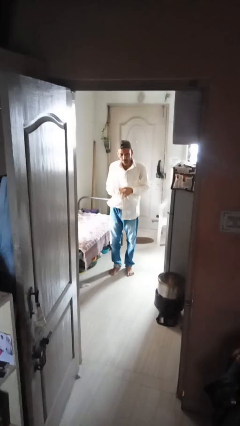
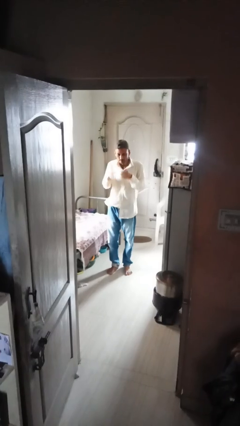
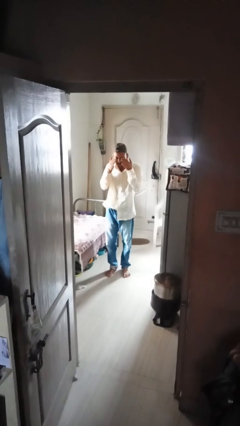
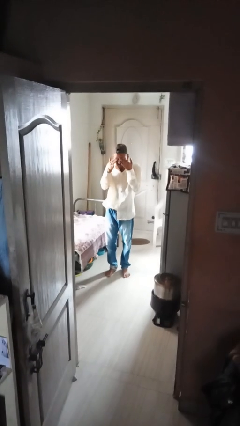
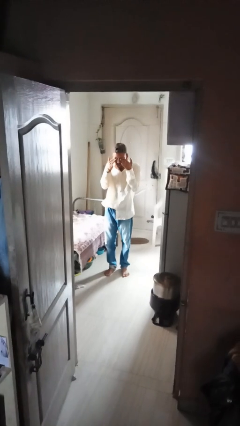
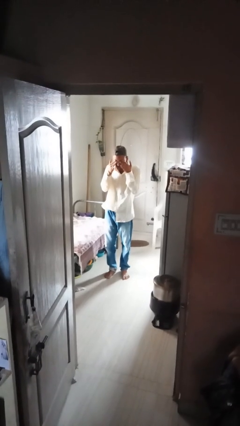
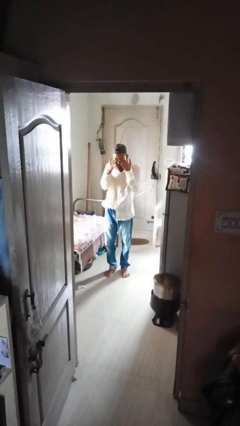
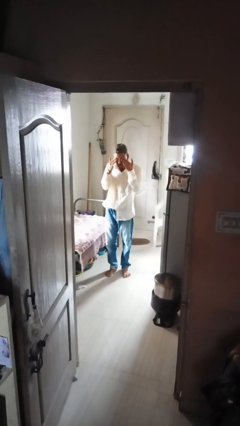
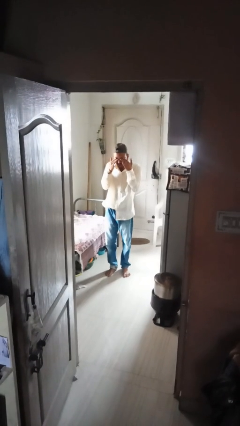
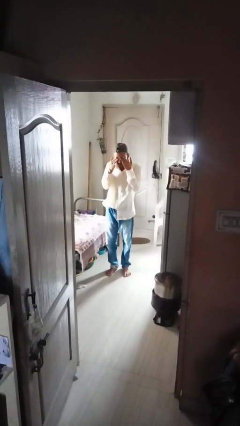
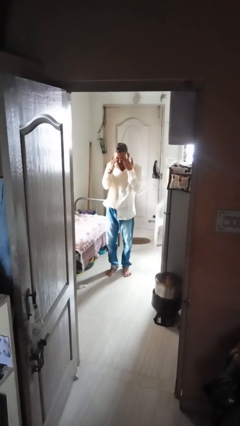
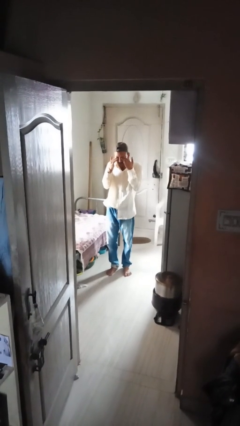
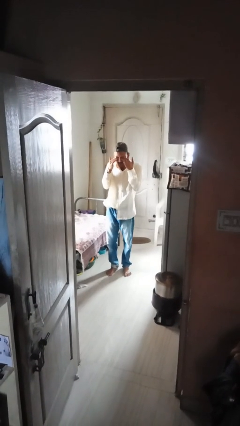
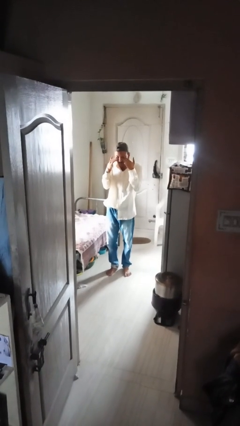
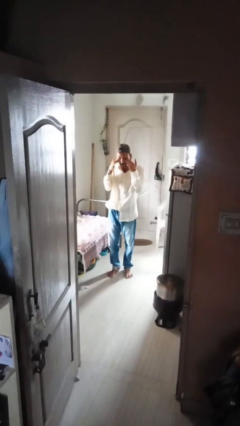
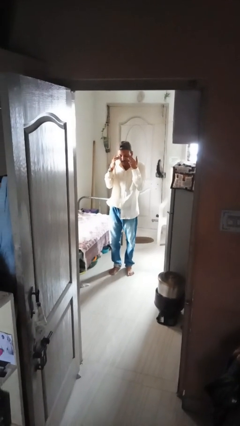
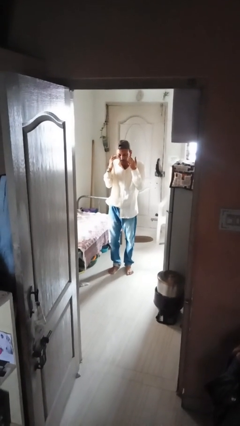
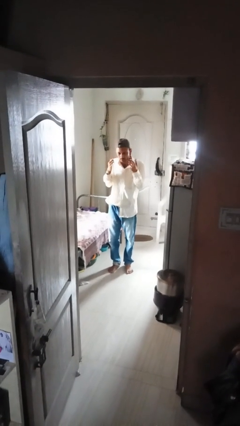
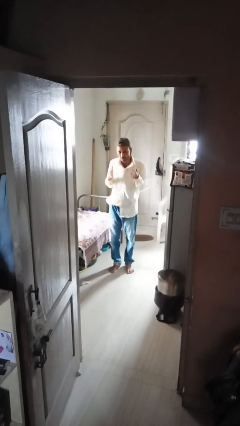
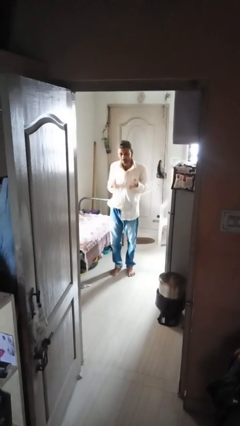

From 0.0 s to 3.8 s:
person rubs eyes

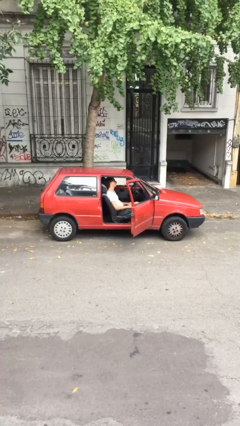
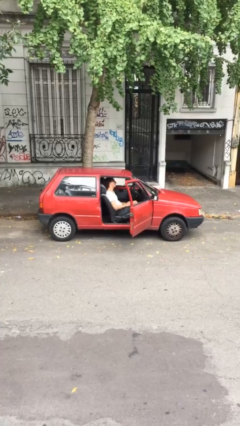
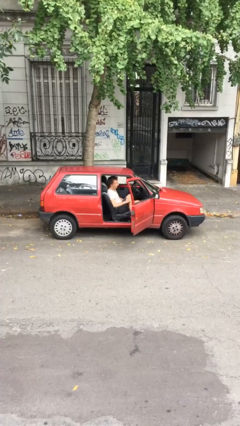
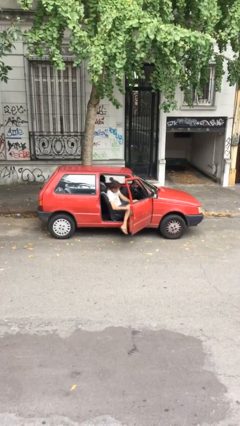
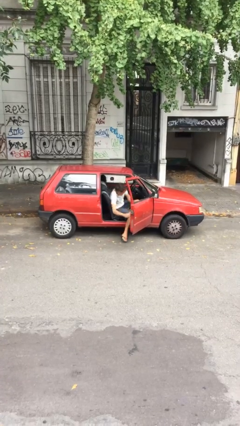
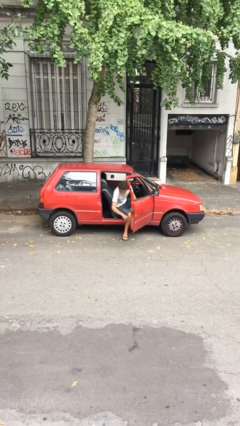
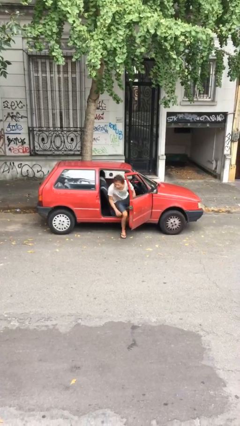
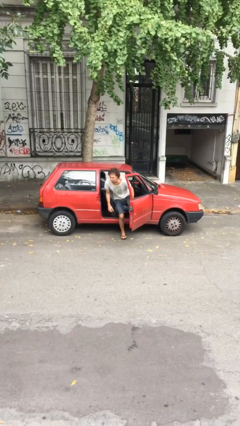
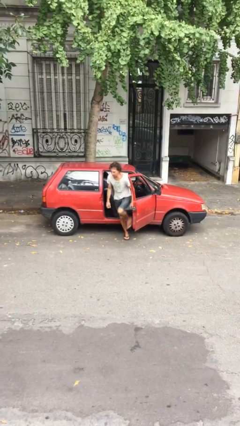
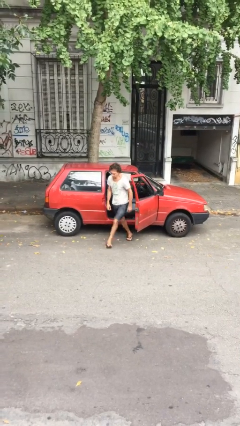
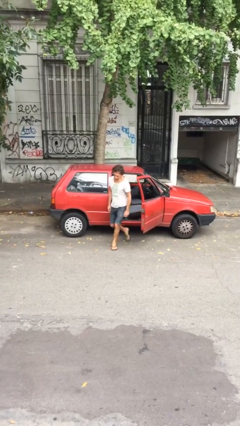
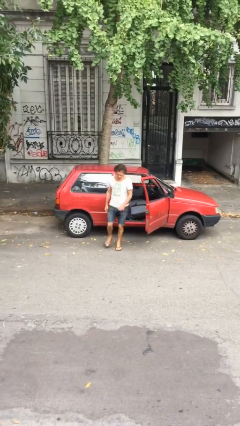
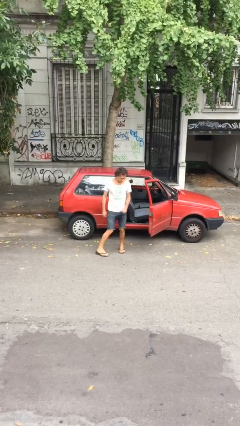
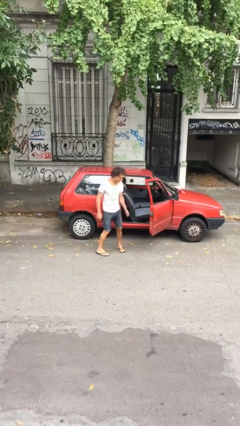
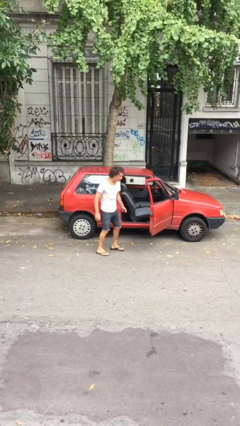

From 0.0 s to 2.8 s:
person exits car

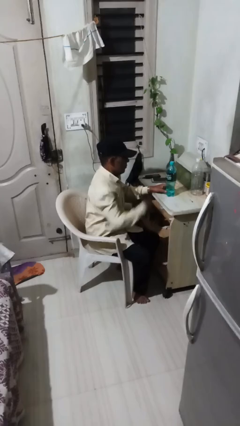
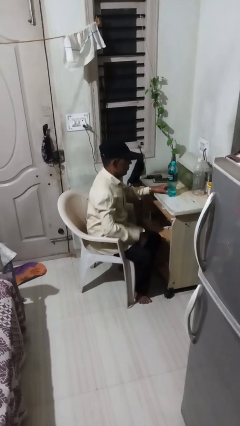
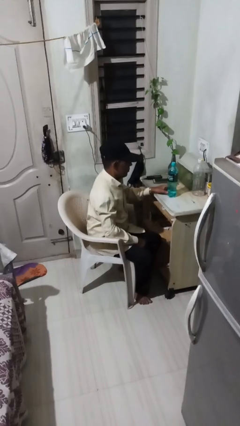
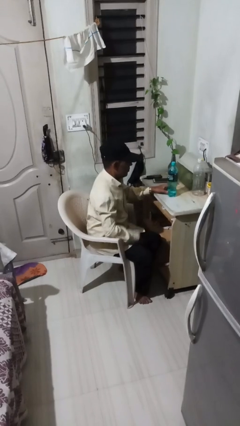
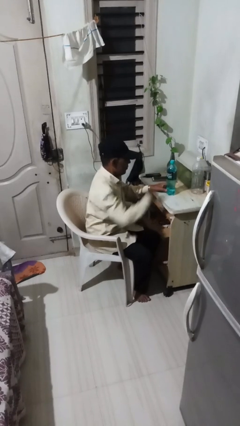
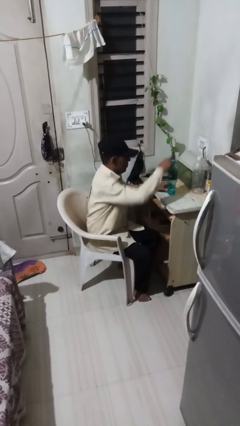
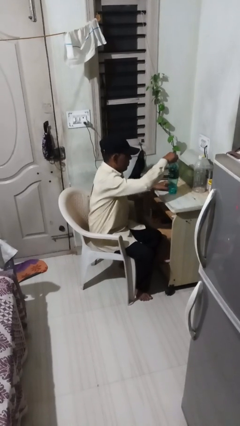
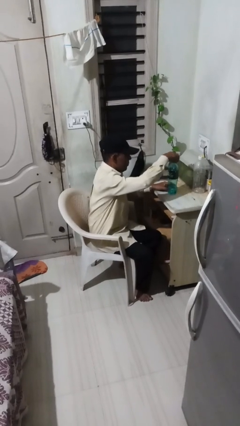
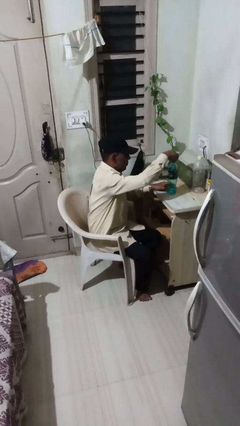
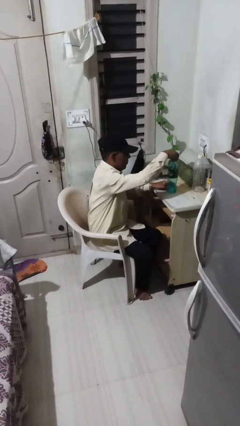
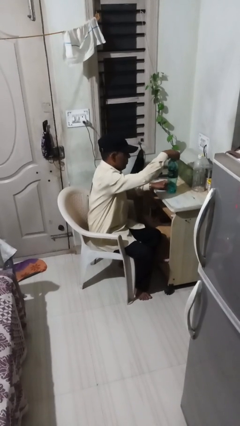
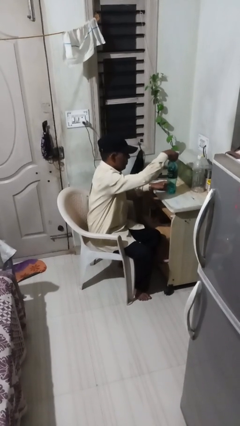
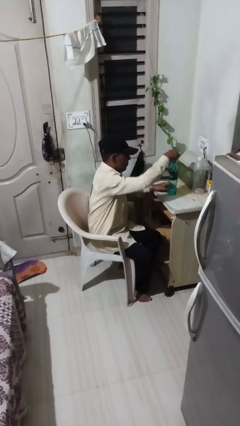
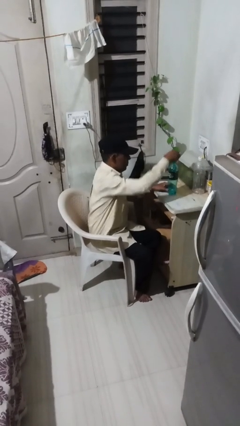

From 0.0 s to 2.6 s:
person unscrews lid from bottle

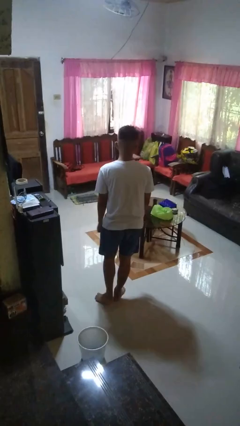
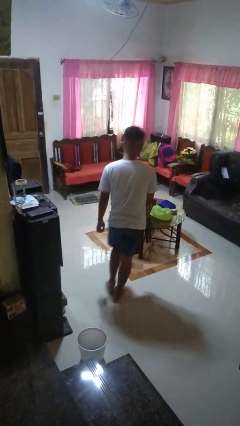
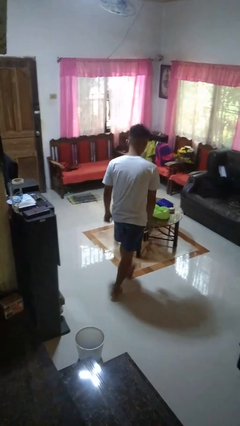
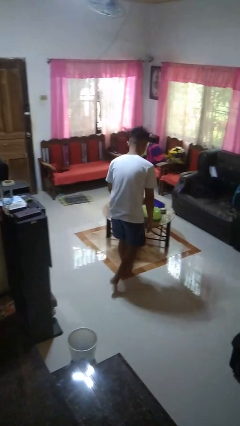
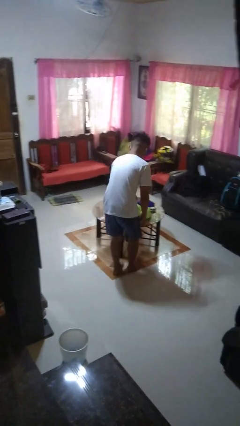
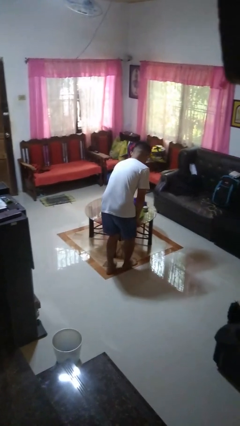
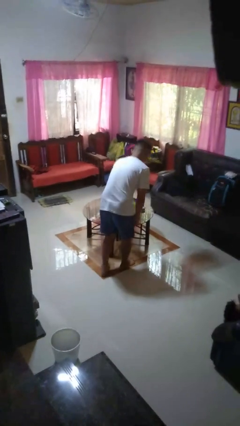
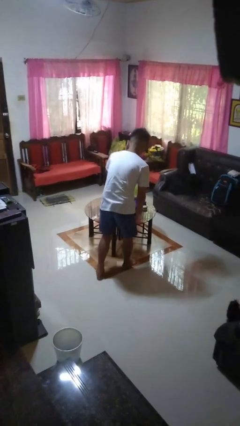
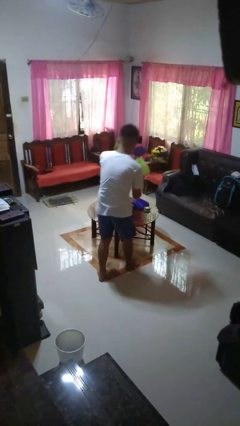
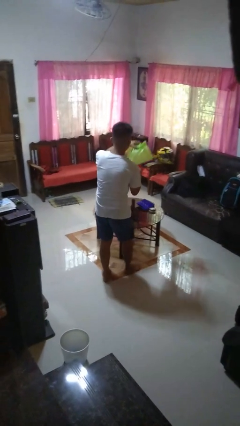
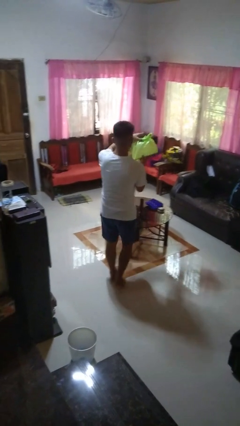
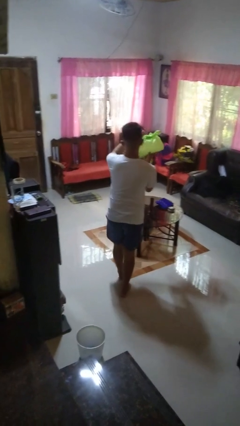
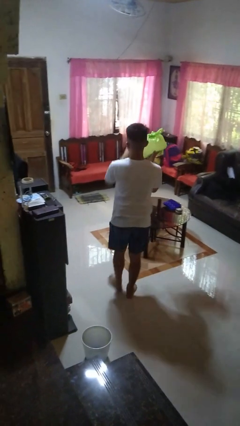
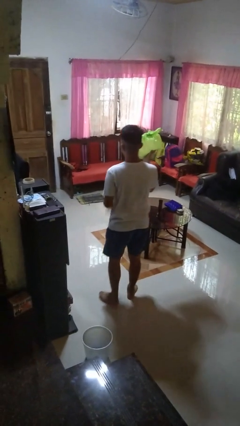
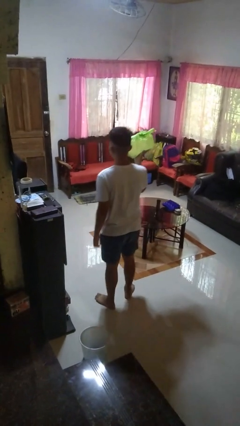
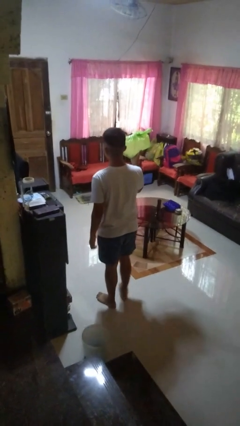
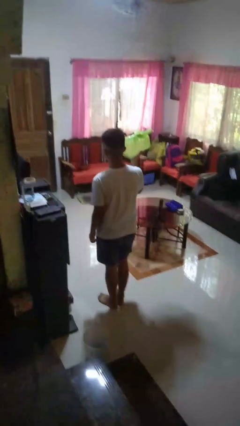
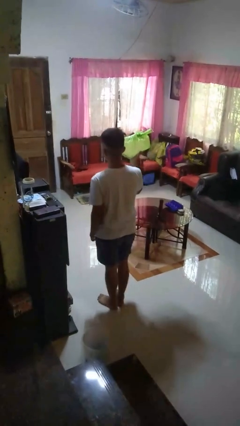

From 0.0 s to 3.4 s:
person picks up object from table

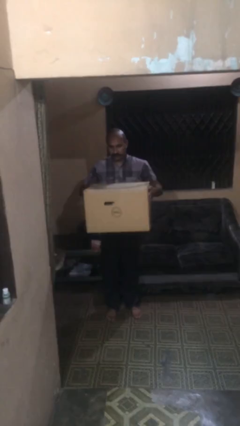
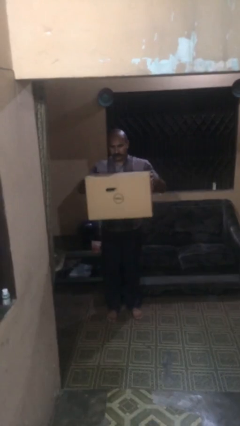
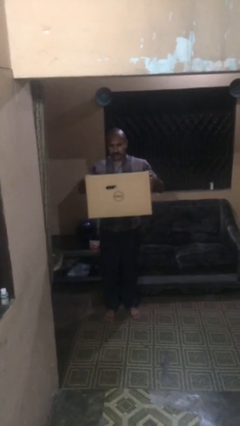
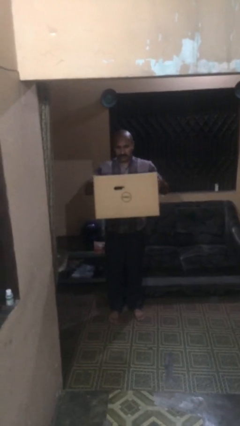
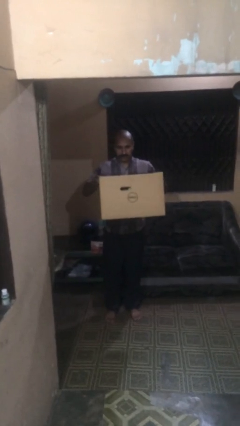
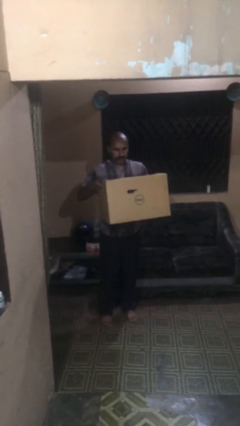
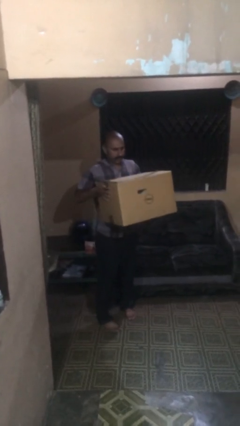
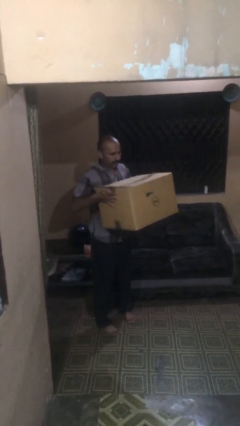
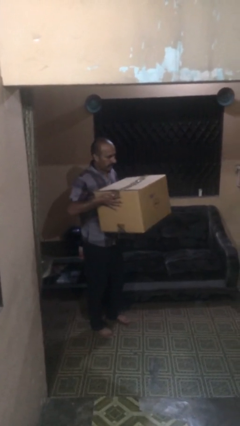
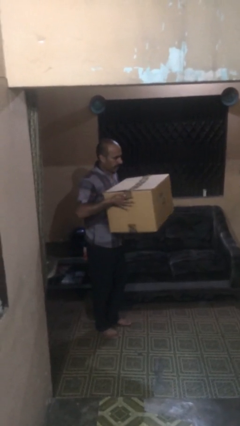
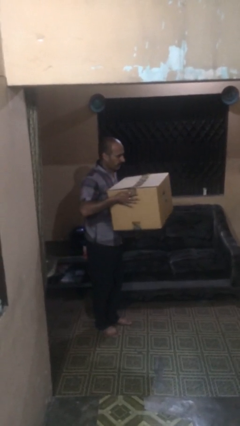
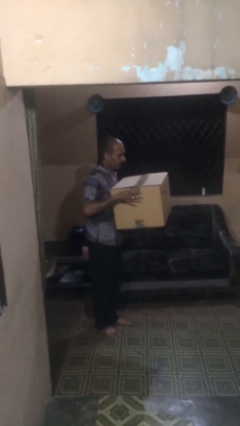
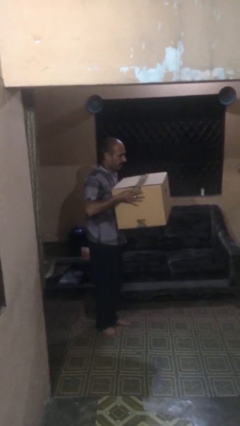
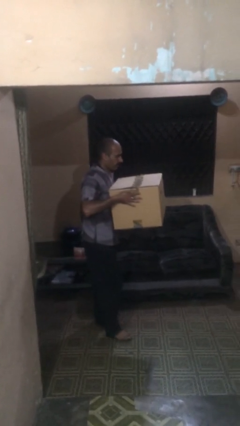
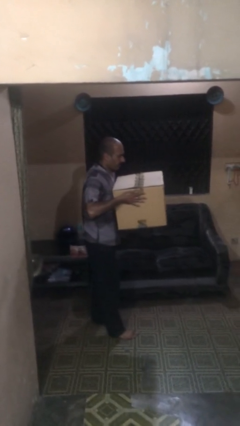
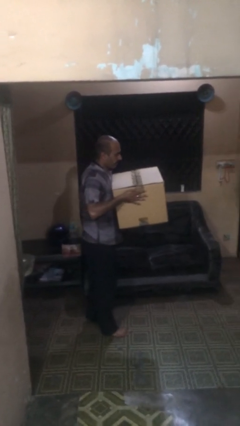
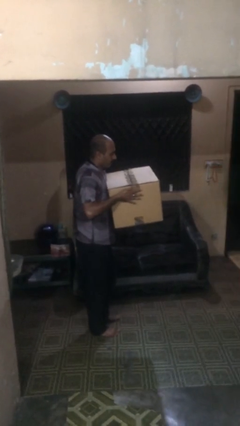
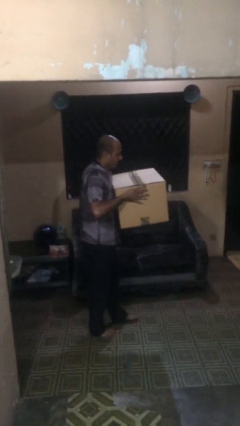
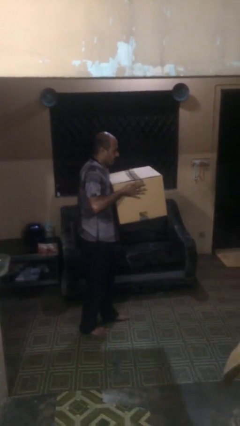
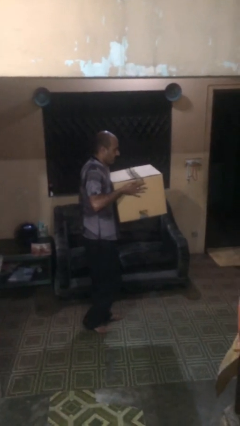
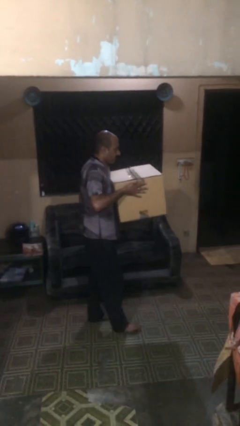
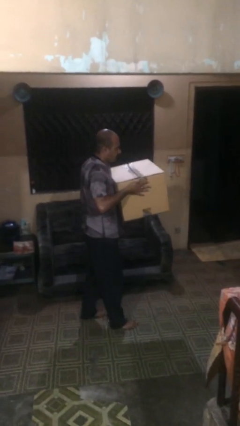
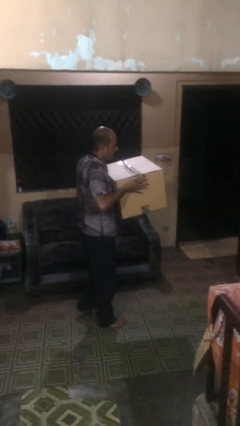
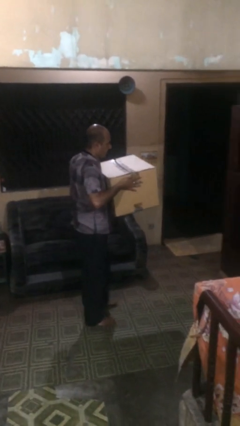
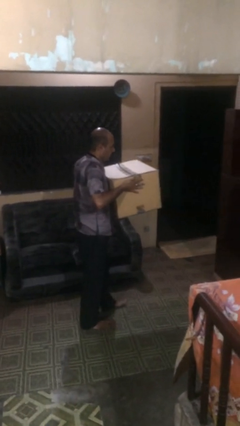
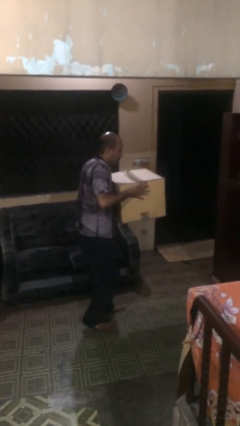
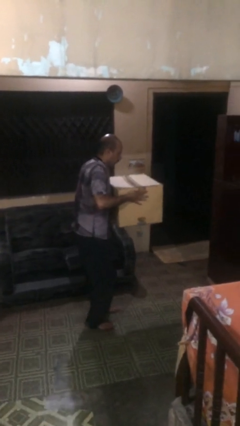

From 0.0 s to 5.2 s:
person carries heavy object
